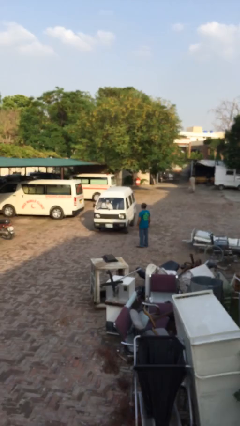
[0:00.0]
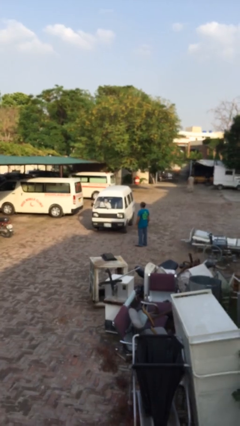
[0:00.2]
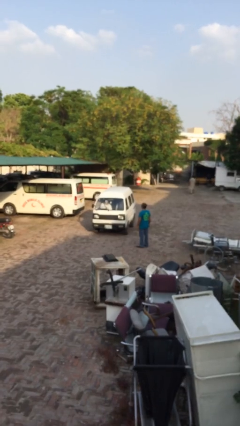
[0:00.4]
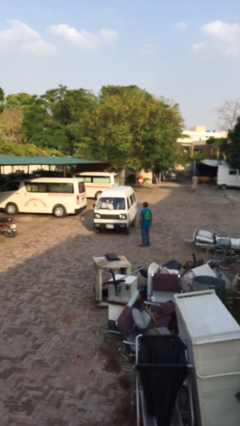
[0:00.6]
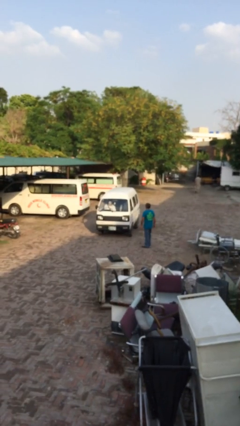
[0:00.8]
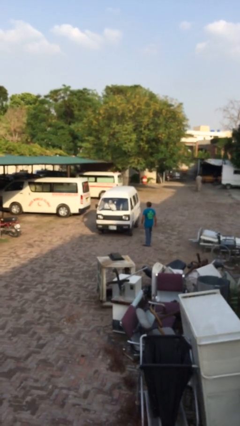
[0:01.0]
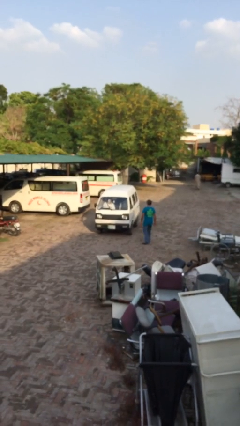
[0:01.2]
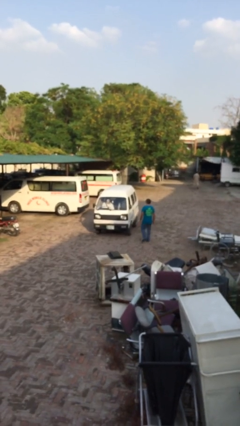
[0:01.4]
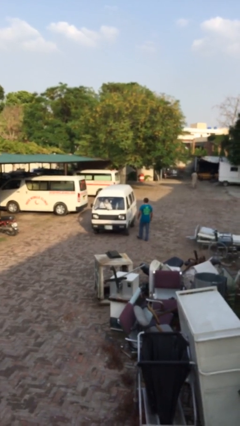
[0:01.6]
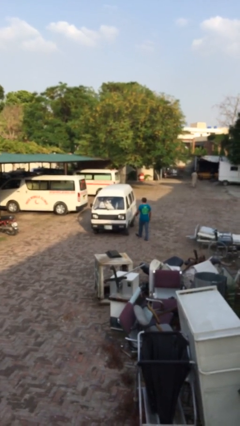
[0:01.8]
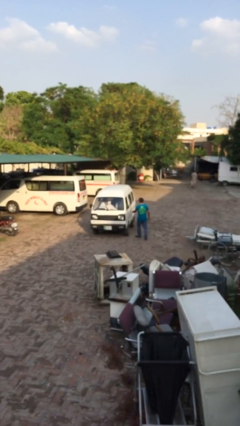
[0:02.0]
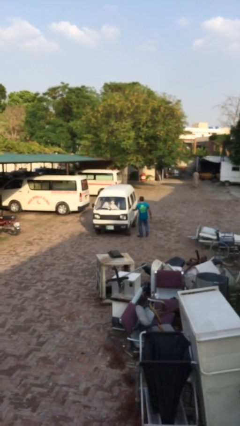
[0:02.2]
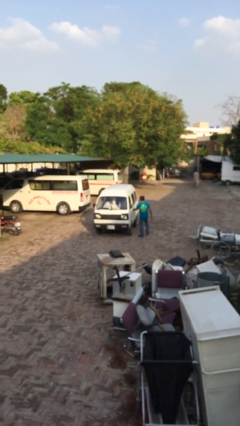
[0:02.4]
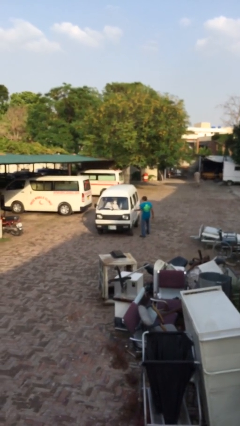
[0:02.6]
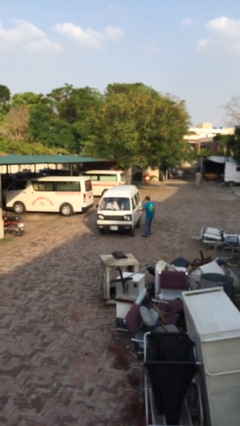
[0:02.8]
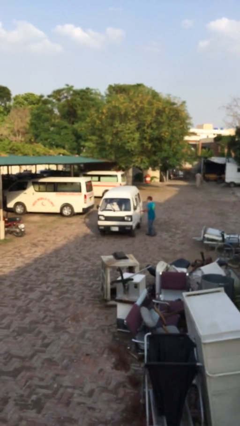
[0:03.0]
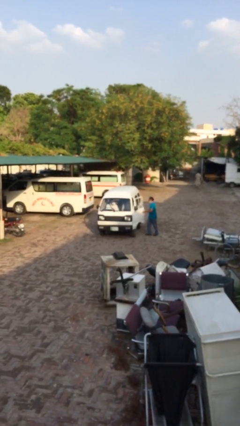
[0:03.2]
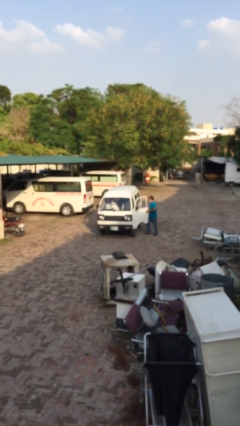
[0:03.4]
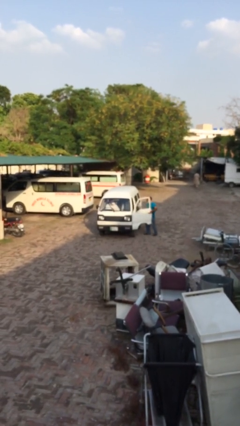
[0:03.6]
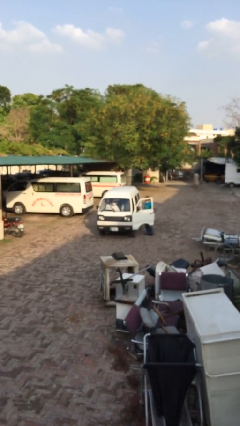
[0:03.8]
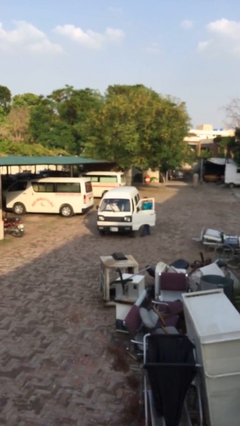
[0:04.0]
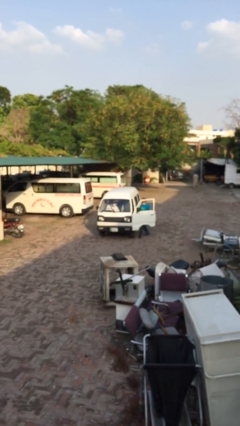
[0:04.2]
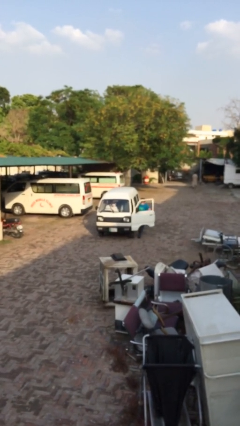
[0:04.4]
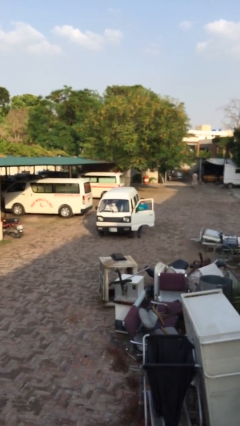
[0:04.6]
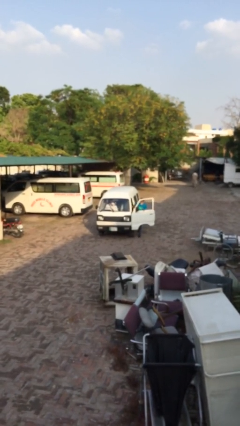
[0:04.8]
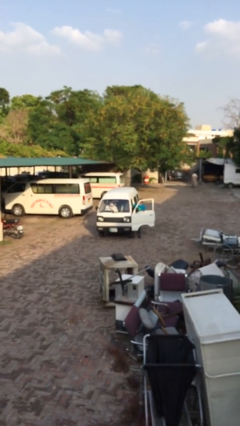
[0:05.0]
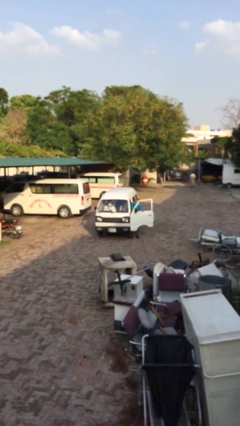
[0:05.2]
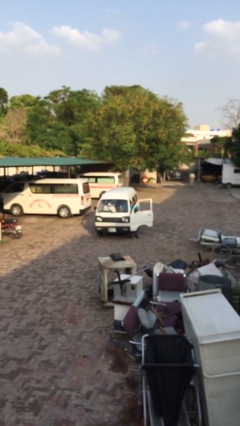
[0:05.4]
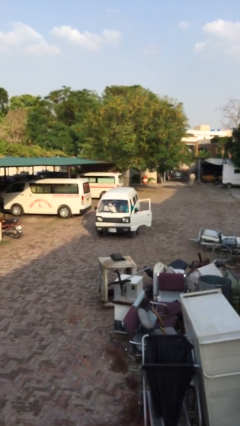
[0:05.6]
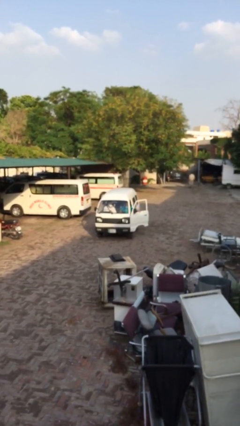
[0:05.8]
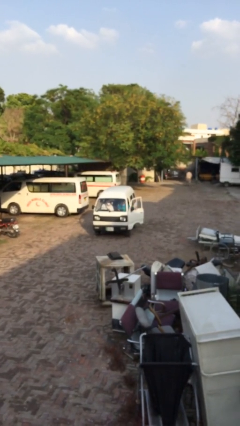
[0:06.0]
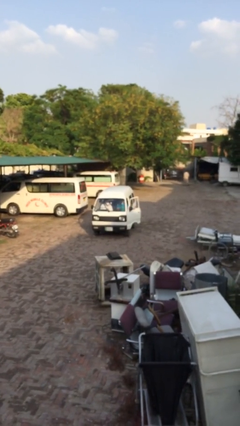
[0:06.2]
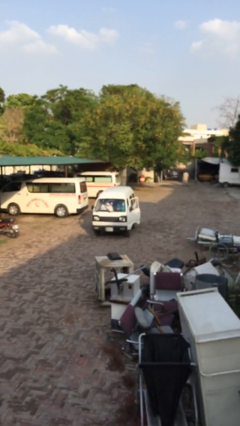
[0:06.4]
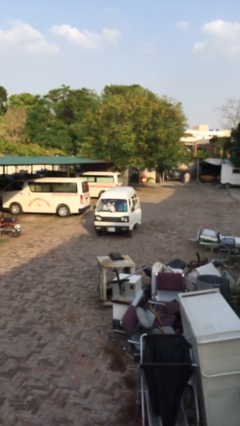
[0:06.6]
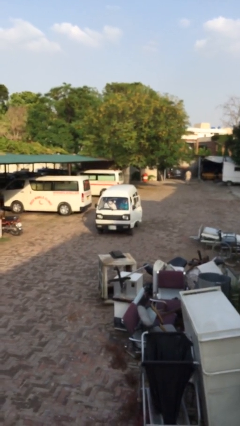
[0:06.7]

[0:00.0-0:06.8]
car picks up person

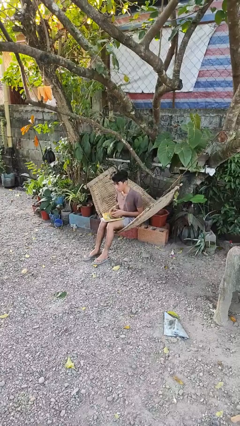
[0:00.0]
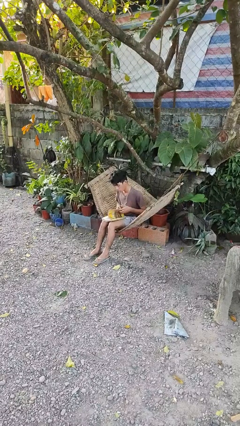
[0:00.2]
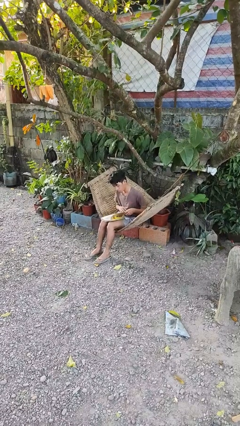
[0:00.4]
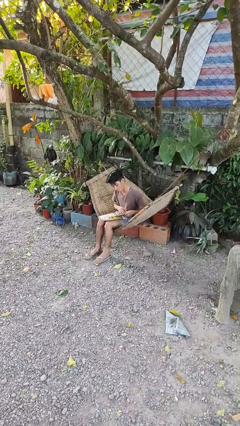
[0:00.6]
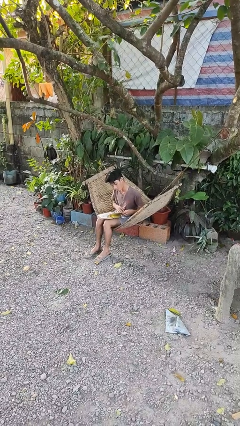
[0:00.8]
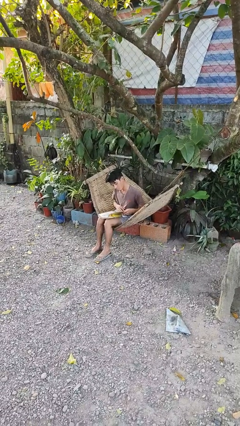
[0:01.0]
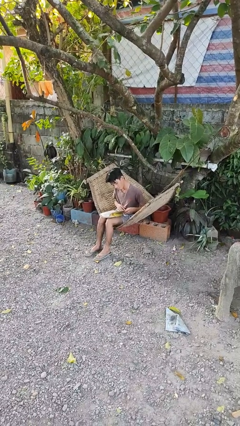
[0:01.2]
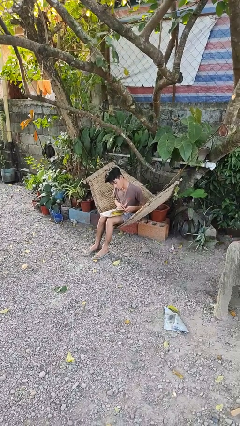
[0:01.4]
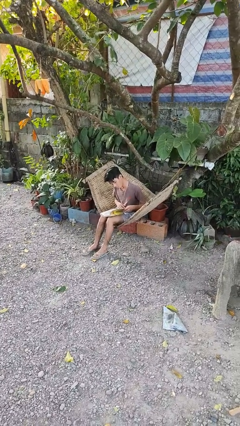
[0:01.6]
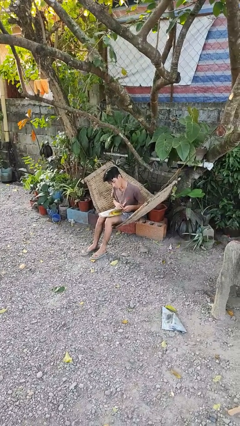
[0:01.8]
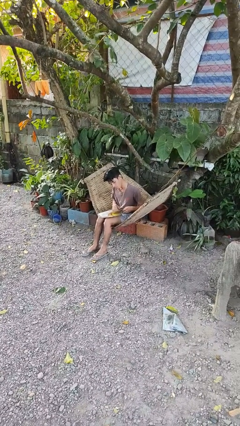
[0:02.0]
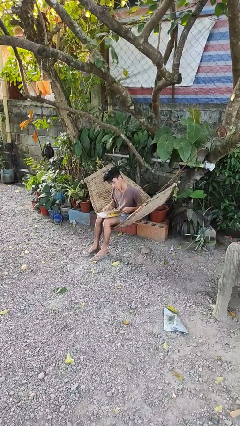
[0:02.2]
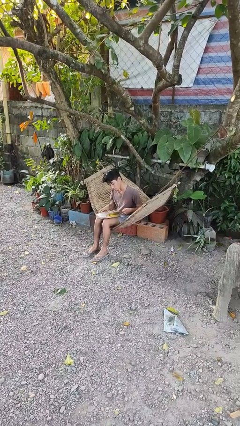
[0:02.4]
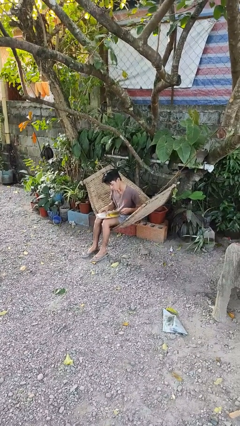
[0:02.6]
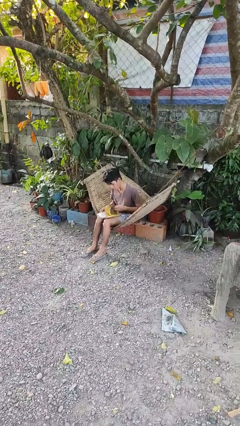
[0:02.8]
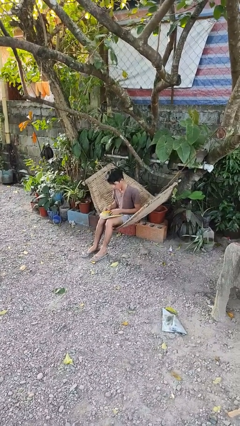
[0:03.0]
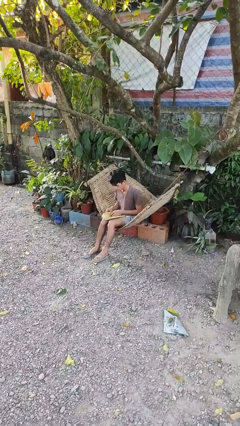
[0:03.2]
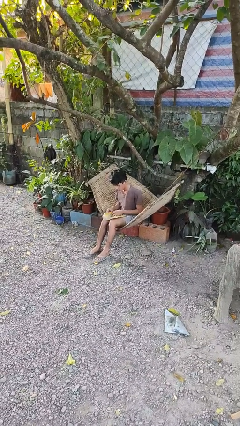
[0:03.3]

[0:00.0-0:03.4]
person reads book

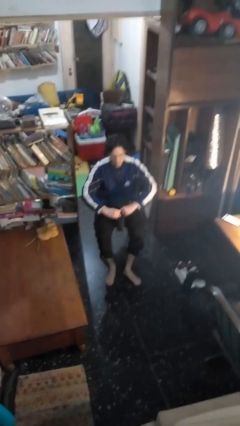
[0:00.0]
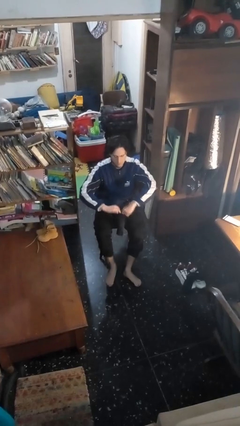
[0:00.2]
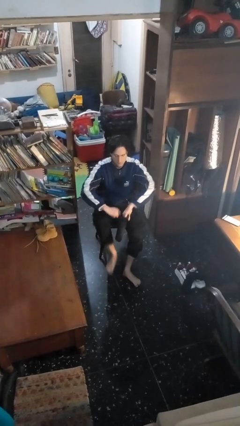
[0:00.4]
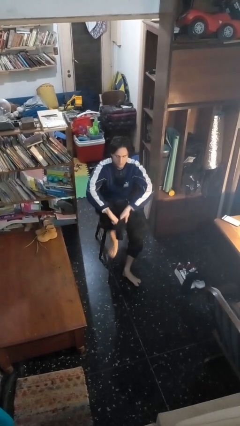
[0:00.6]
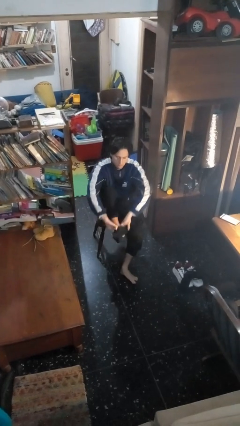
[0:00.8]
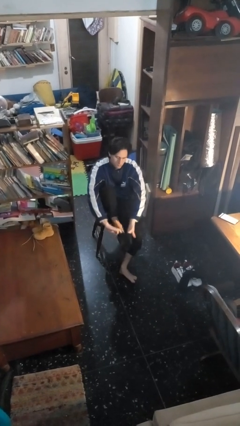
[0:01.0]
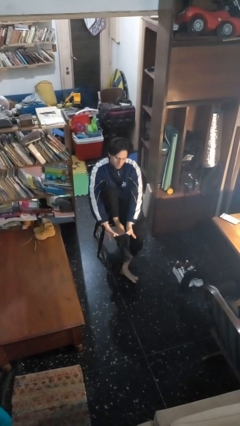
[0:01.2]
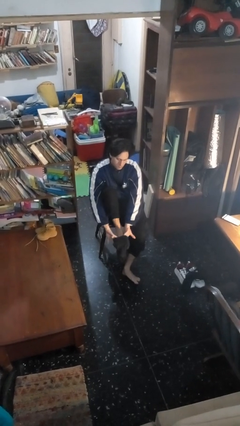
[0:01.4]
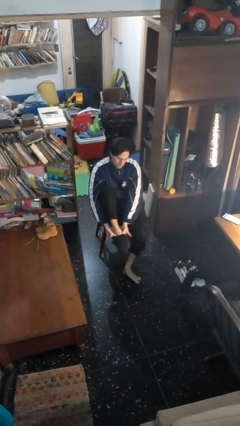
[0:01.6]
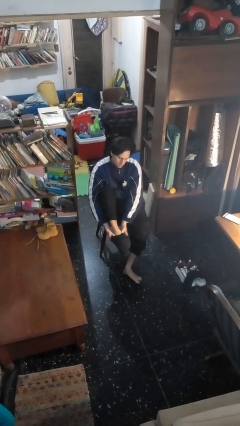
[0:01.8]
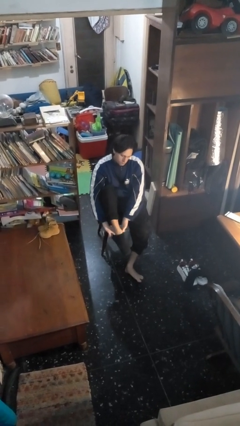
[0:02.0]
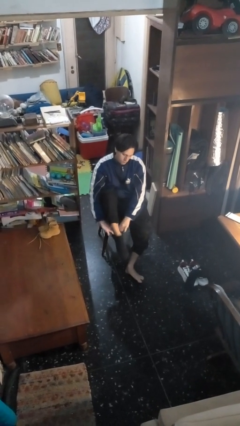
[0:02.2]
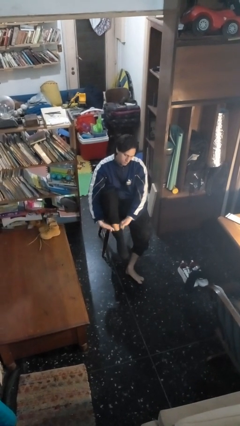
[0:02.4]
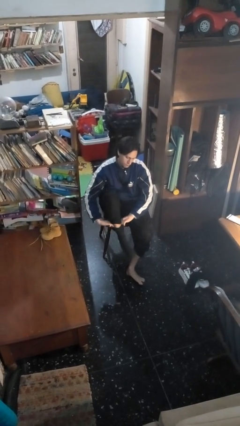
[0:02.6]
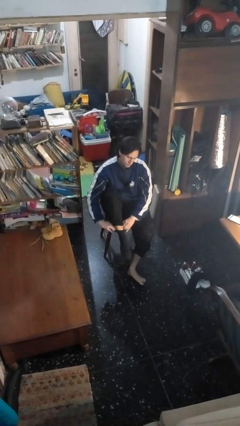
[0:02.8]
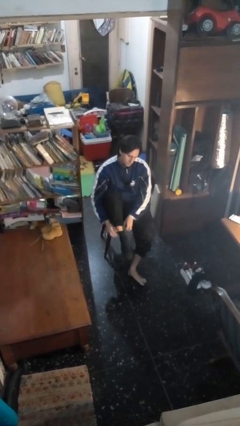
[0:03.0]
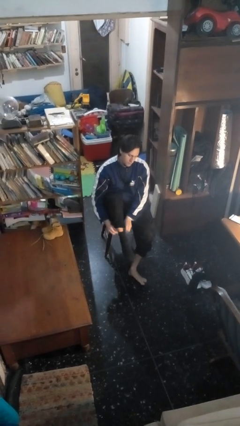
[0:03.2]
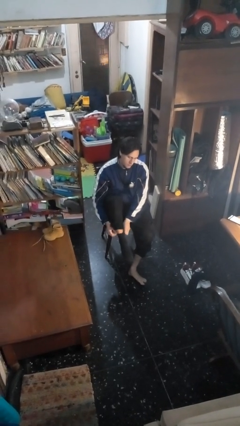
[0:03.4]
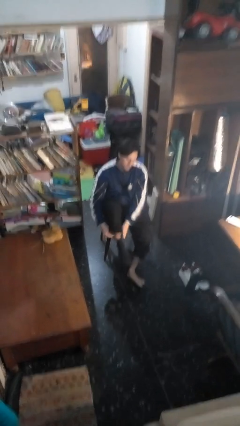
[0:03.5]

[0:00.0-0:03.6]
person puts on socks

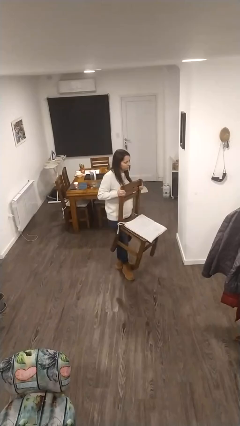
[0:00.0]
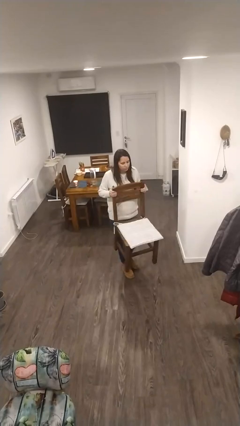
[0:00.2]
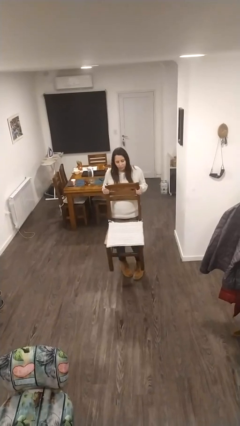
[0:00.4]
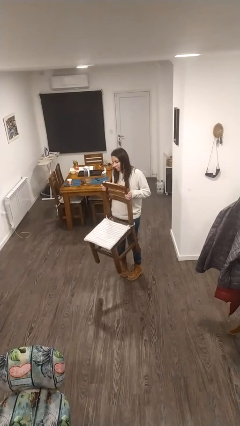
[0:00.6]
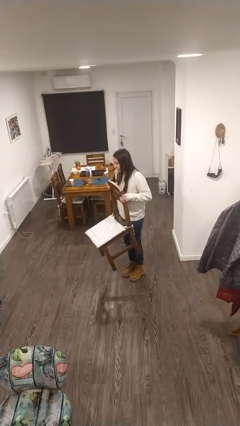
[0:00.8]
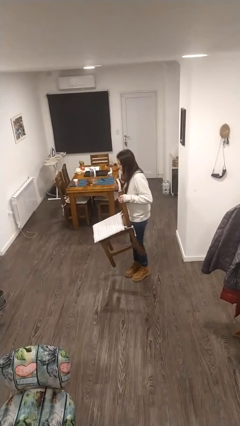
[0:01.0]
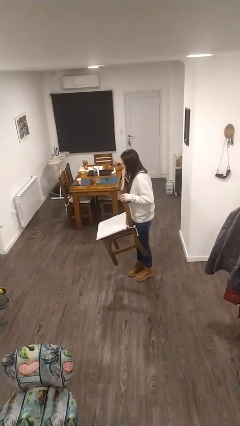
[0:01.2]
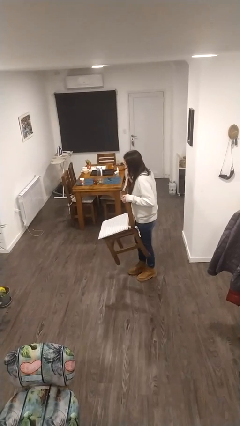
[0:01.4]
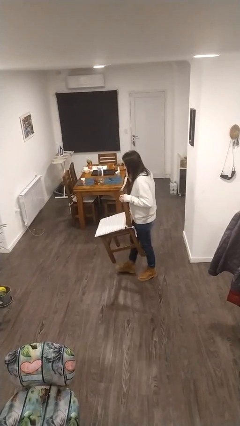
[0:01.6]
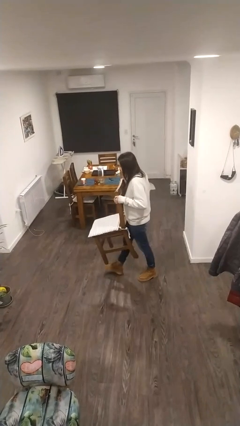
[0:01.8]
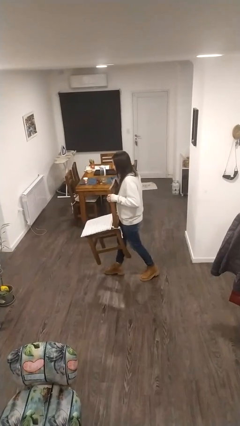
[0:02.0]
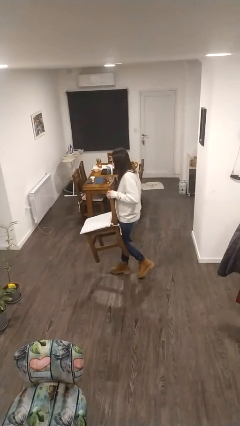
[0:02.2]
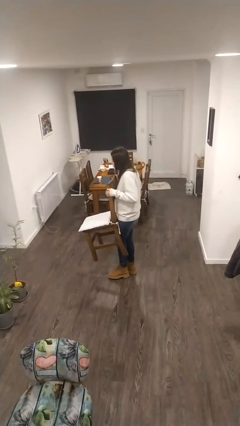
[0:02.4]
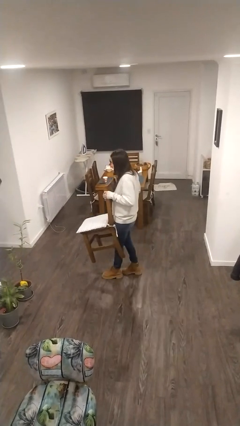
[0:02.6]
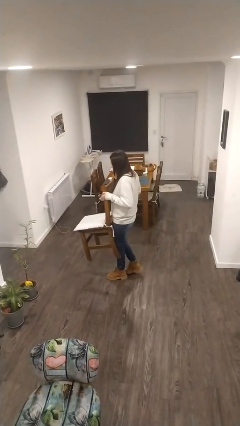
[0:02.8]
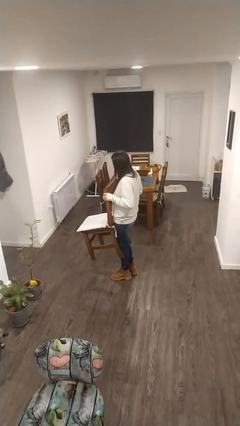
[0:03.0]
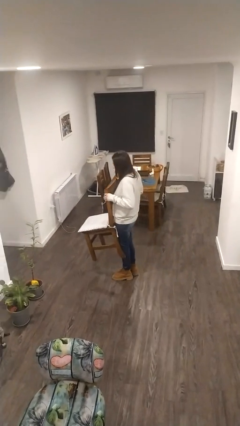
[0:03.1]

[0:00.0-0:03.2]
person carries furniture

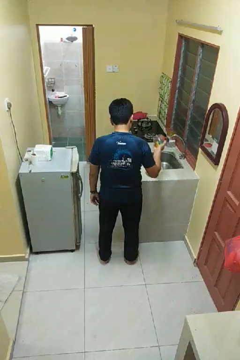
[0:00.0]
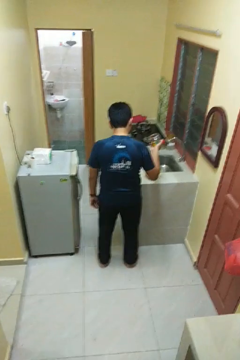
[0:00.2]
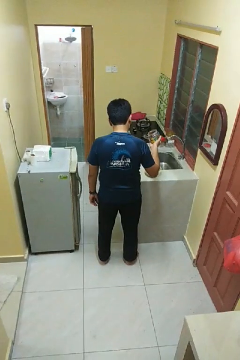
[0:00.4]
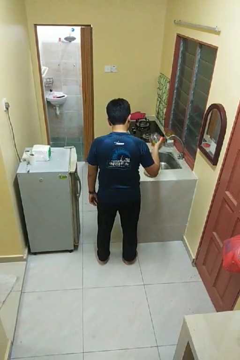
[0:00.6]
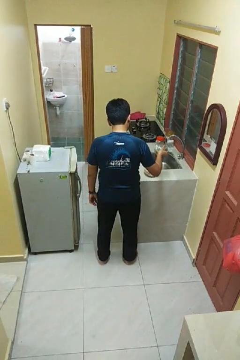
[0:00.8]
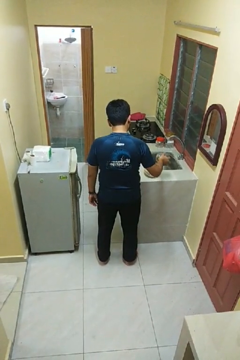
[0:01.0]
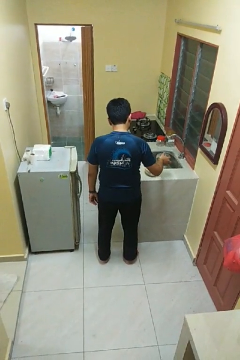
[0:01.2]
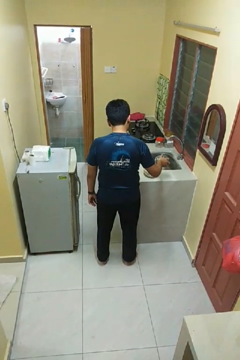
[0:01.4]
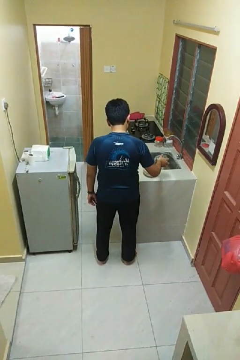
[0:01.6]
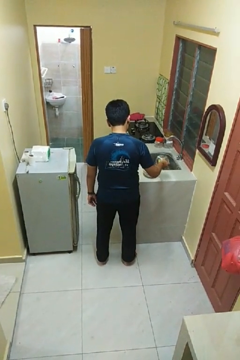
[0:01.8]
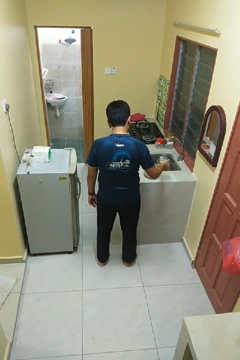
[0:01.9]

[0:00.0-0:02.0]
person pours into bowl
